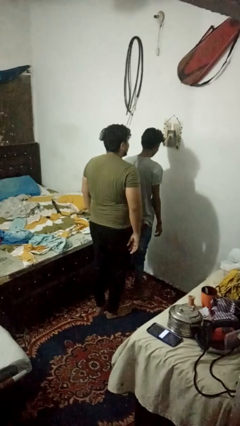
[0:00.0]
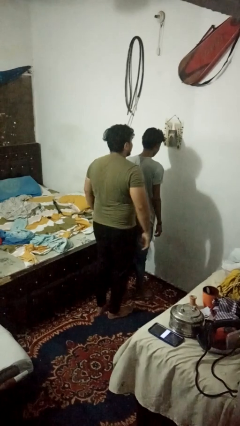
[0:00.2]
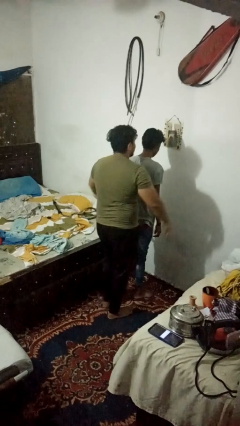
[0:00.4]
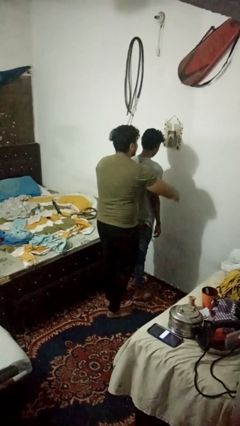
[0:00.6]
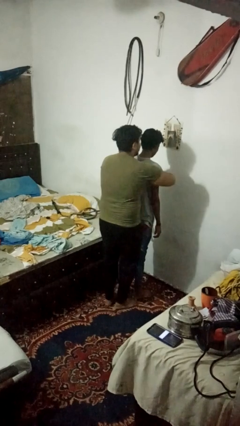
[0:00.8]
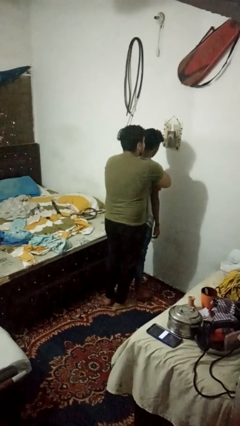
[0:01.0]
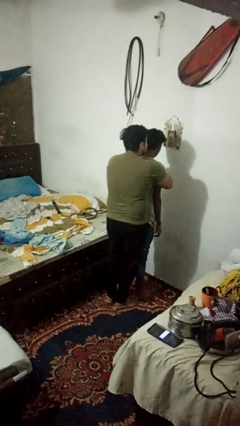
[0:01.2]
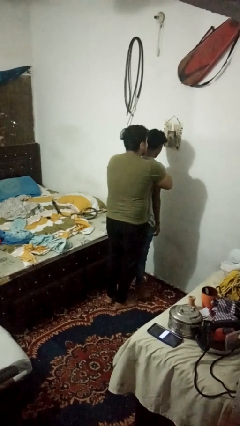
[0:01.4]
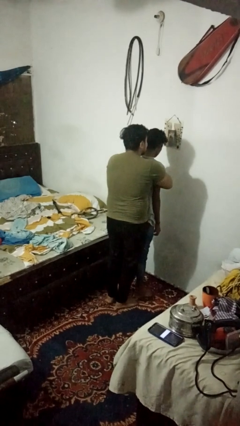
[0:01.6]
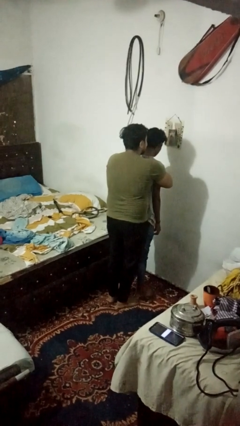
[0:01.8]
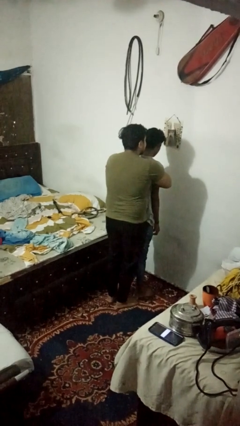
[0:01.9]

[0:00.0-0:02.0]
person hugs person from behind

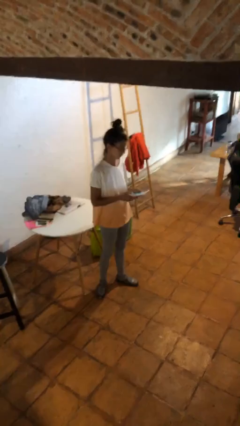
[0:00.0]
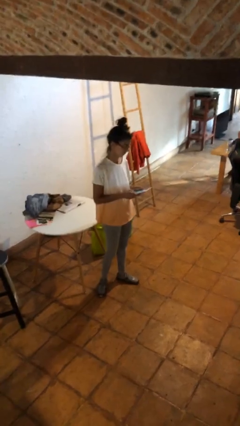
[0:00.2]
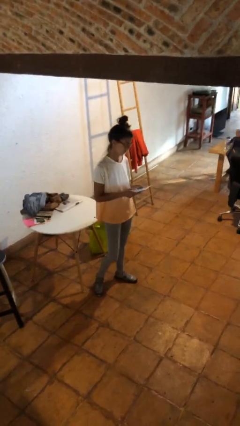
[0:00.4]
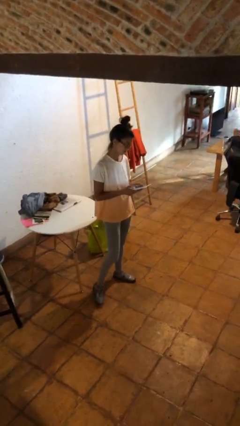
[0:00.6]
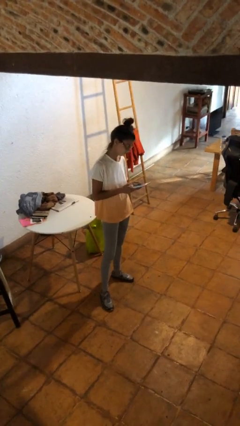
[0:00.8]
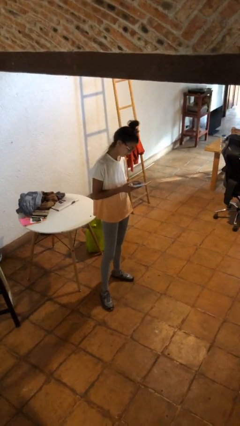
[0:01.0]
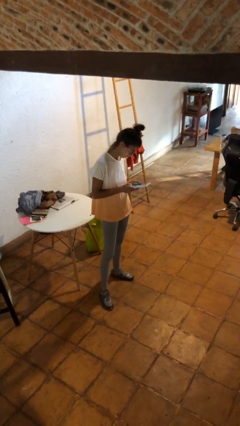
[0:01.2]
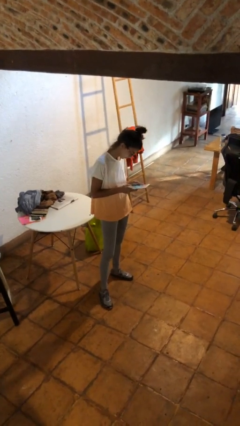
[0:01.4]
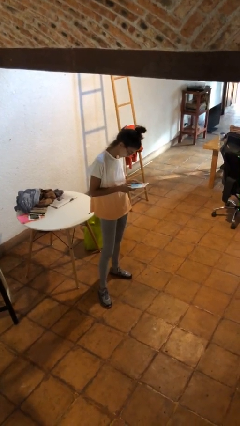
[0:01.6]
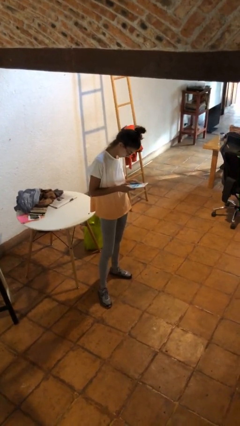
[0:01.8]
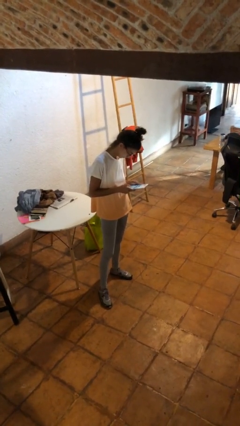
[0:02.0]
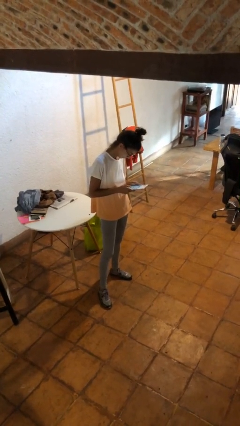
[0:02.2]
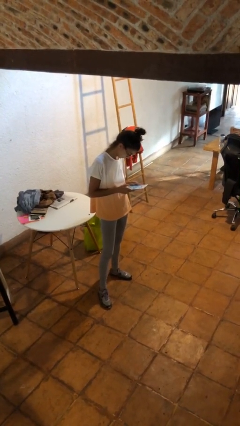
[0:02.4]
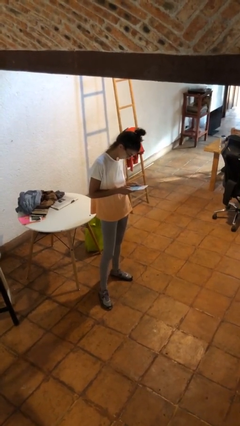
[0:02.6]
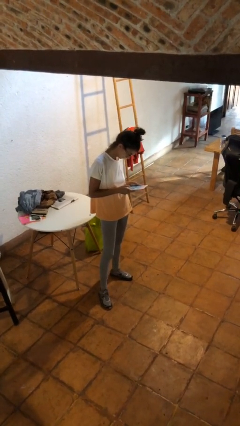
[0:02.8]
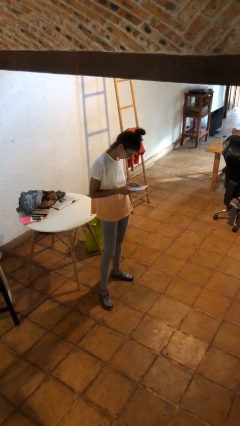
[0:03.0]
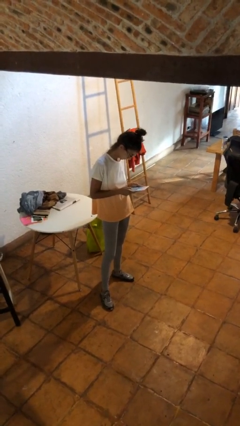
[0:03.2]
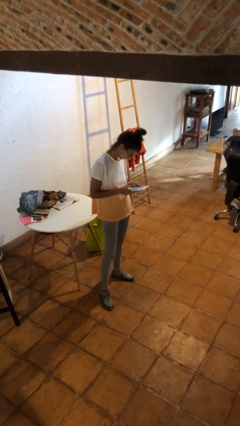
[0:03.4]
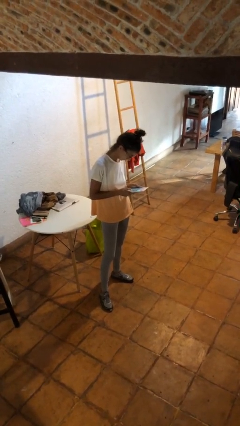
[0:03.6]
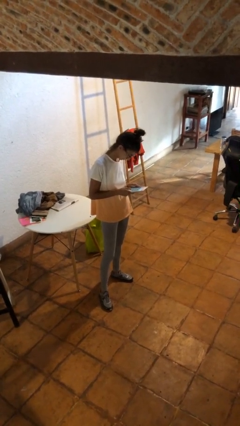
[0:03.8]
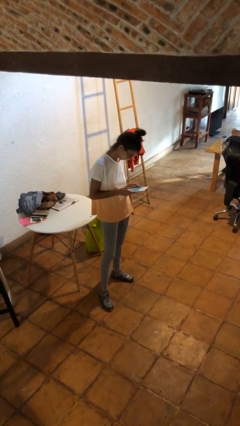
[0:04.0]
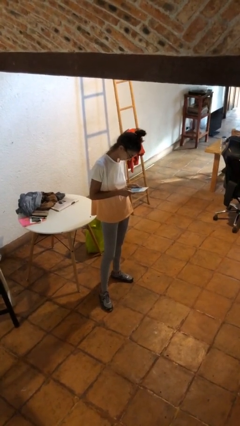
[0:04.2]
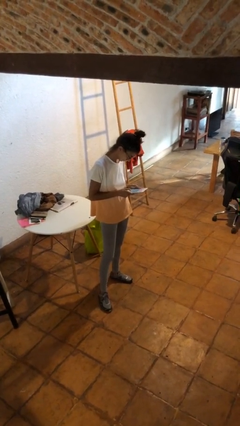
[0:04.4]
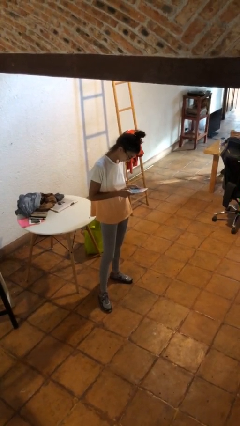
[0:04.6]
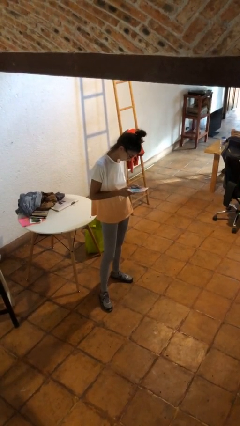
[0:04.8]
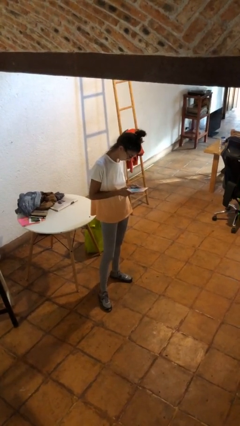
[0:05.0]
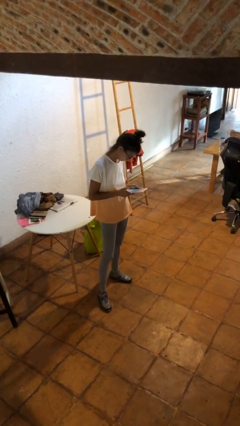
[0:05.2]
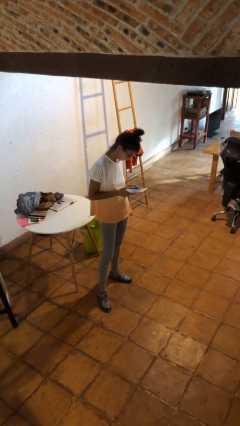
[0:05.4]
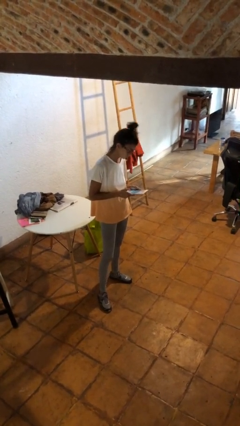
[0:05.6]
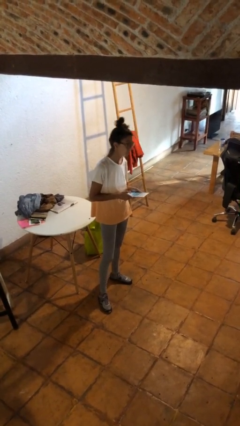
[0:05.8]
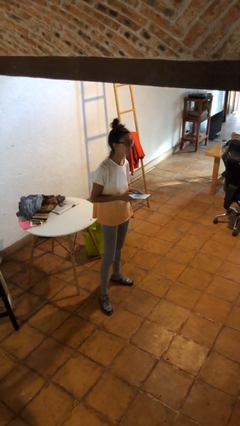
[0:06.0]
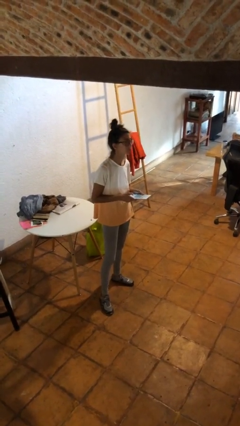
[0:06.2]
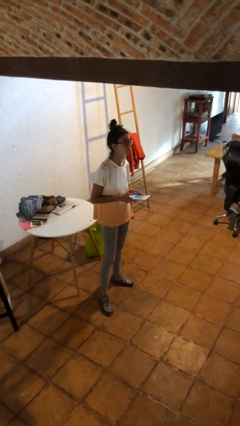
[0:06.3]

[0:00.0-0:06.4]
person interacts with tablet

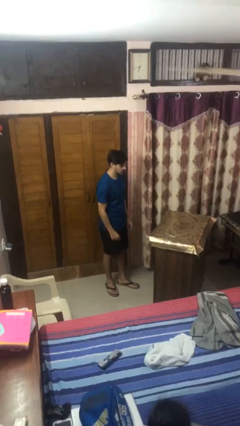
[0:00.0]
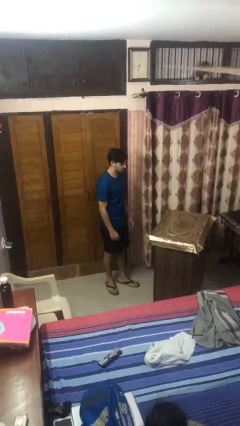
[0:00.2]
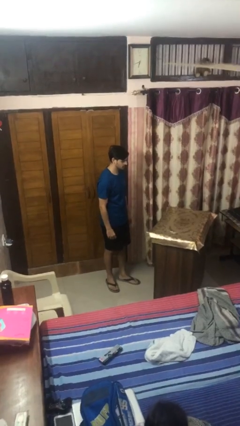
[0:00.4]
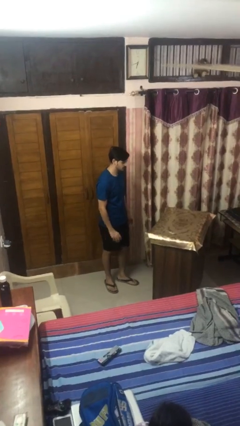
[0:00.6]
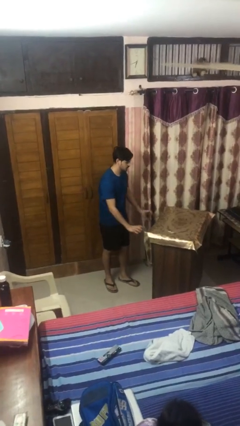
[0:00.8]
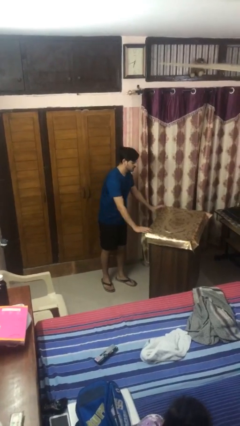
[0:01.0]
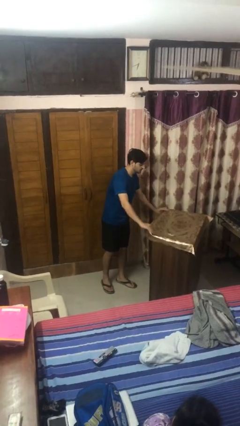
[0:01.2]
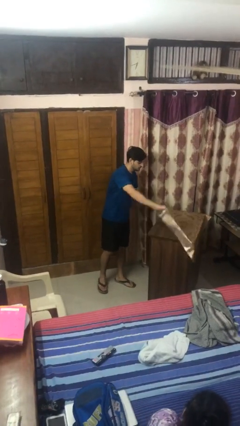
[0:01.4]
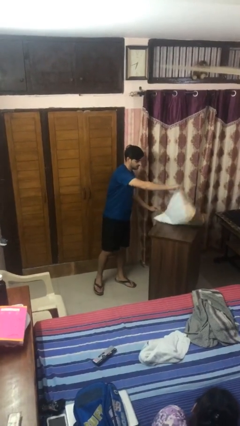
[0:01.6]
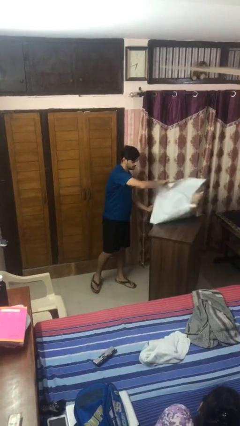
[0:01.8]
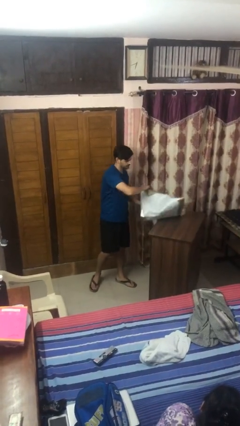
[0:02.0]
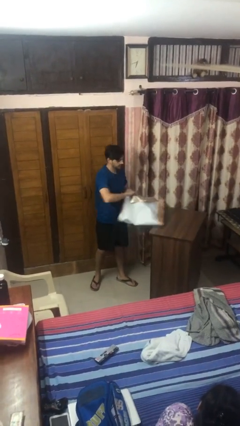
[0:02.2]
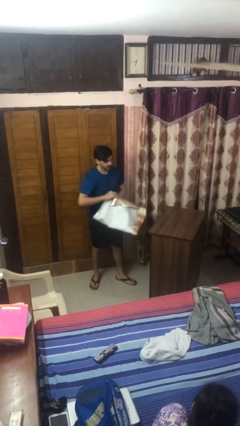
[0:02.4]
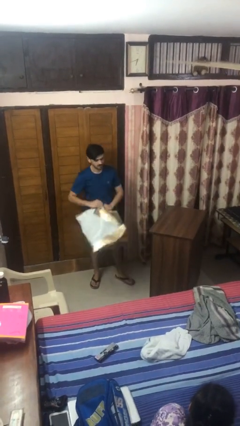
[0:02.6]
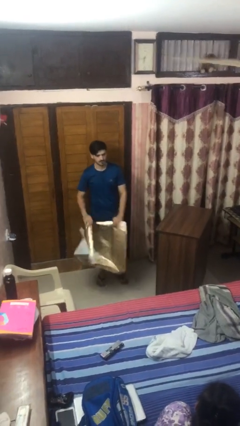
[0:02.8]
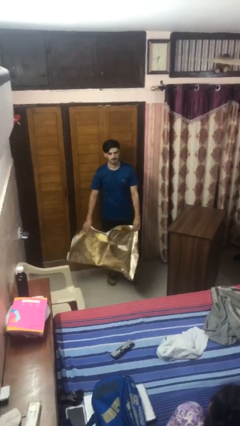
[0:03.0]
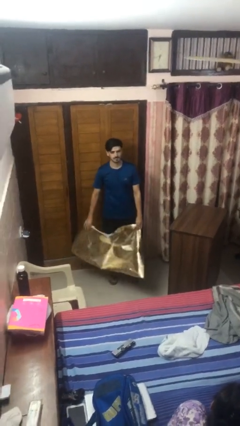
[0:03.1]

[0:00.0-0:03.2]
person folds tablecloth

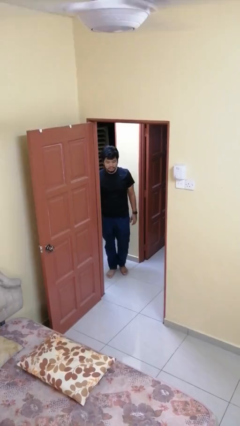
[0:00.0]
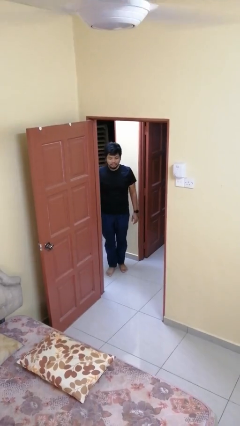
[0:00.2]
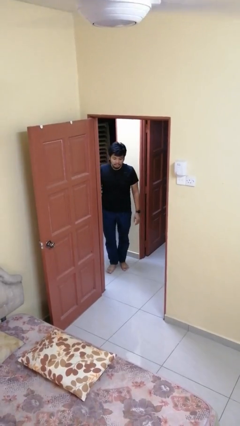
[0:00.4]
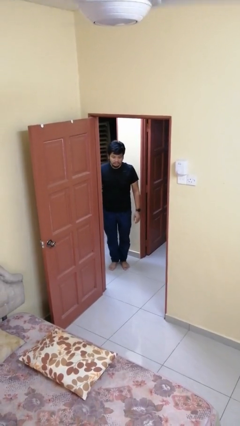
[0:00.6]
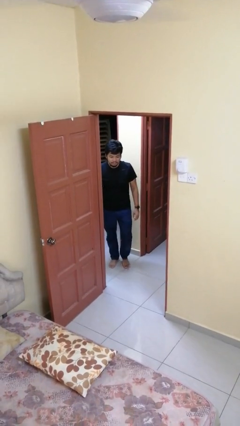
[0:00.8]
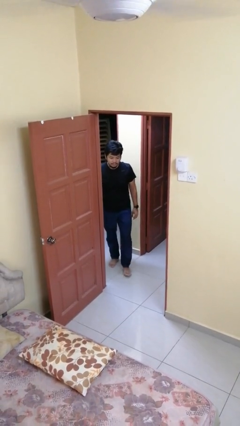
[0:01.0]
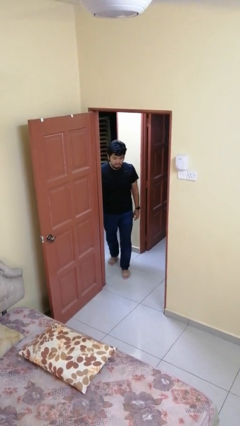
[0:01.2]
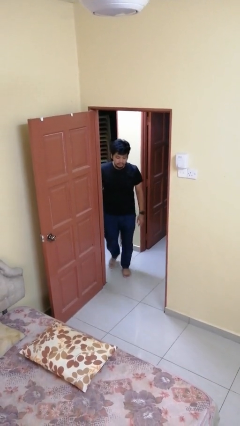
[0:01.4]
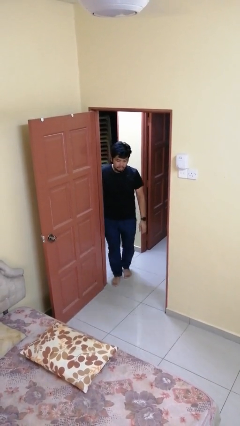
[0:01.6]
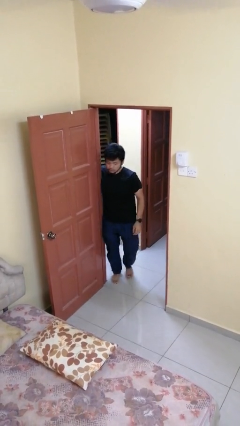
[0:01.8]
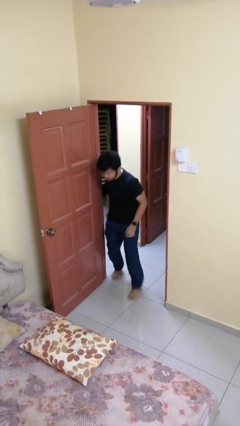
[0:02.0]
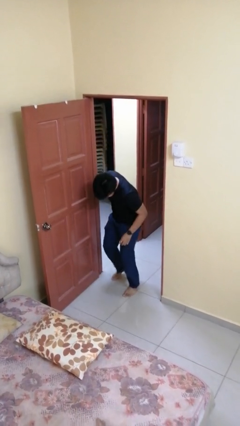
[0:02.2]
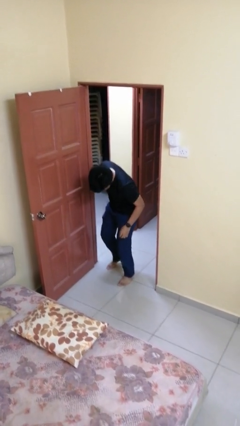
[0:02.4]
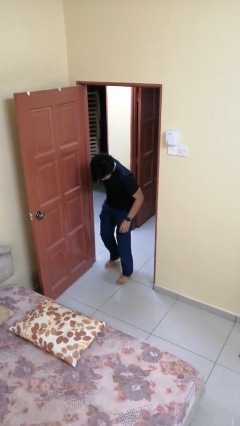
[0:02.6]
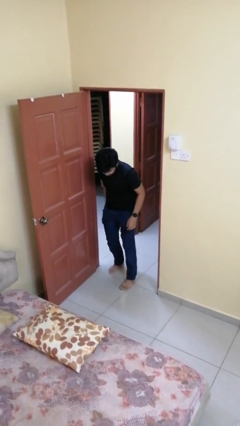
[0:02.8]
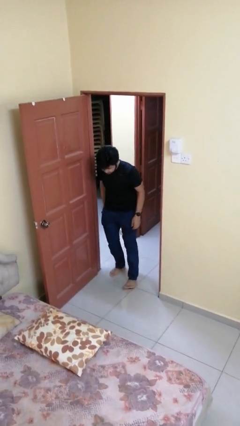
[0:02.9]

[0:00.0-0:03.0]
person bumps into wall

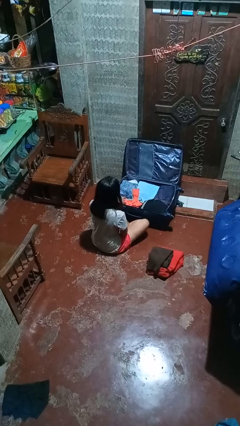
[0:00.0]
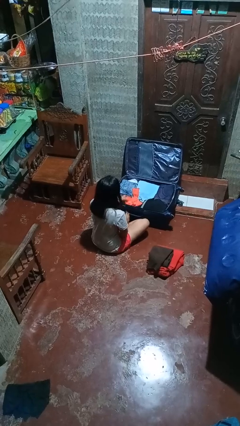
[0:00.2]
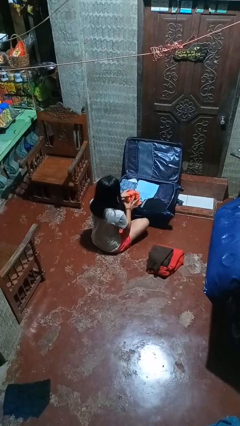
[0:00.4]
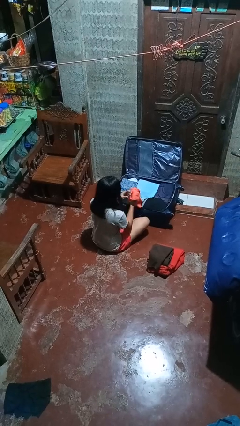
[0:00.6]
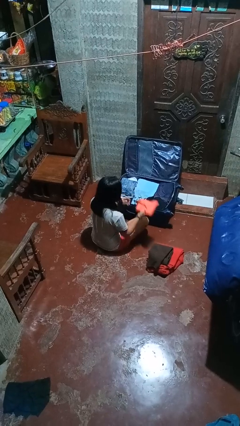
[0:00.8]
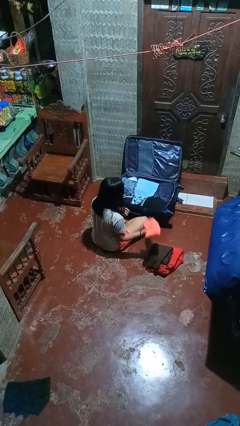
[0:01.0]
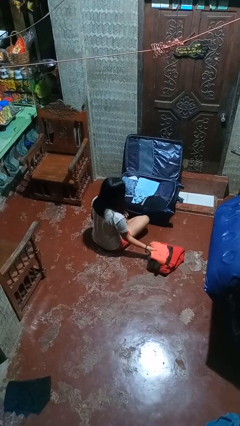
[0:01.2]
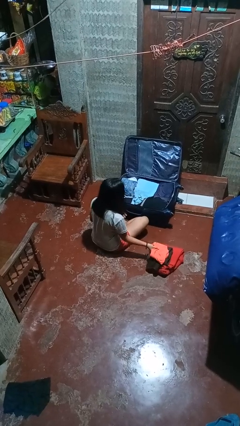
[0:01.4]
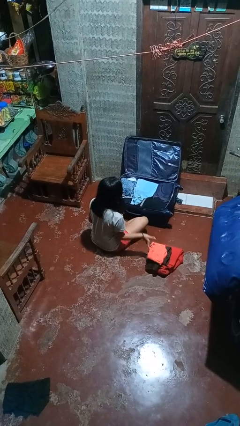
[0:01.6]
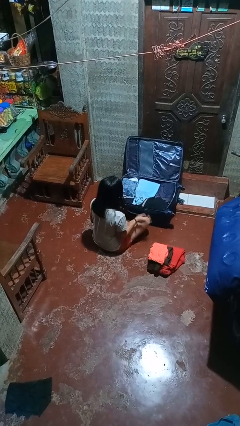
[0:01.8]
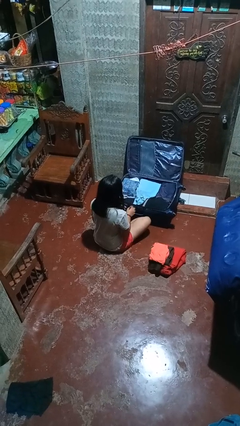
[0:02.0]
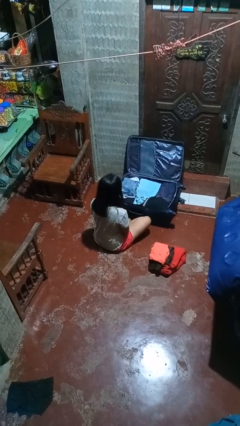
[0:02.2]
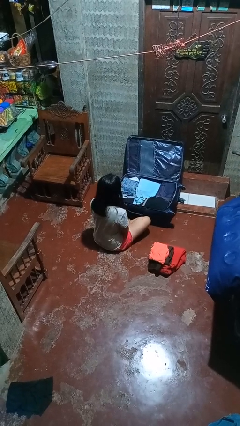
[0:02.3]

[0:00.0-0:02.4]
person unloads clothes from suitcase

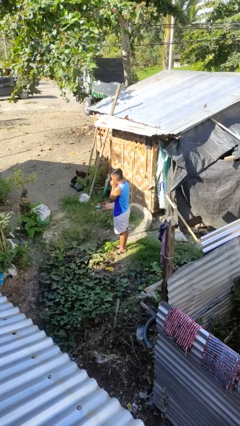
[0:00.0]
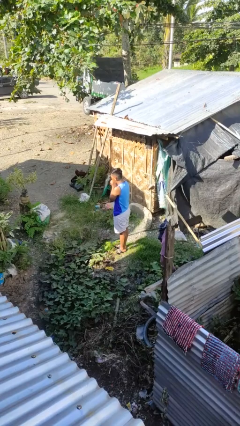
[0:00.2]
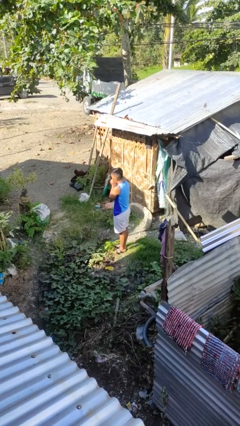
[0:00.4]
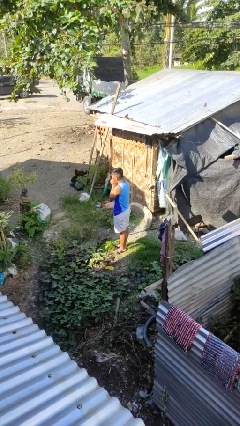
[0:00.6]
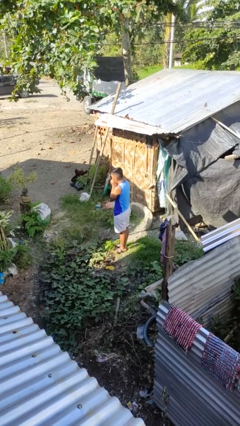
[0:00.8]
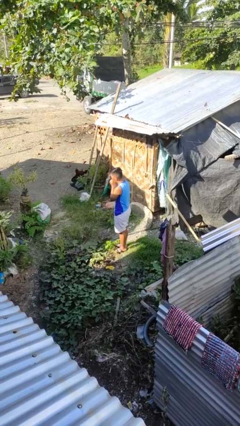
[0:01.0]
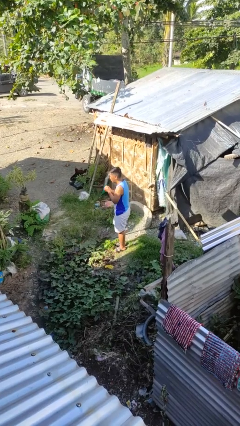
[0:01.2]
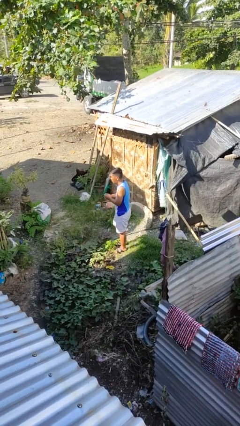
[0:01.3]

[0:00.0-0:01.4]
person blows into hands
